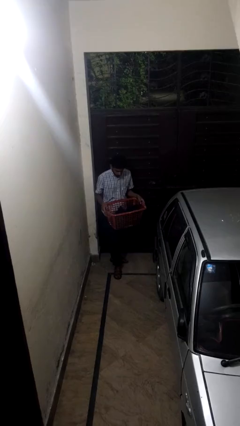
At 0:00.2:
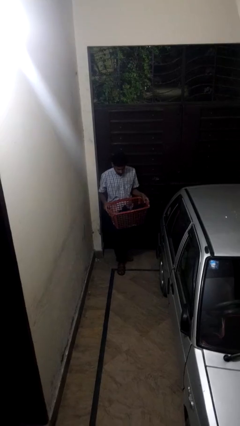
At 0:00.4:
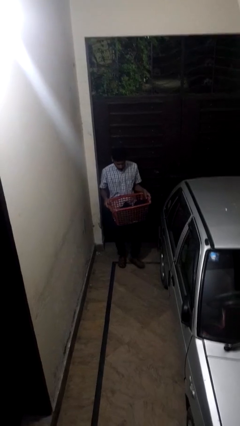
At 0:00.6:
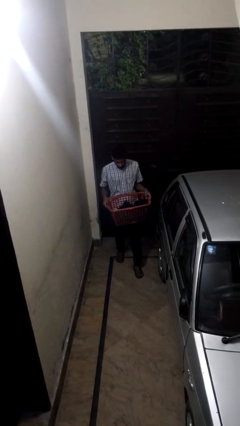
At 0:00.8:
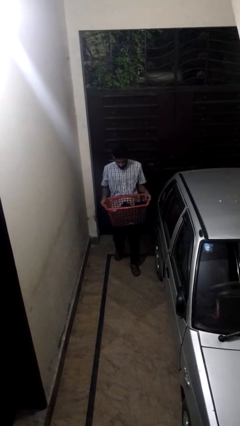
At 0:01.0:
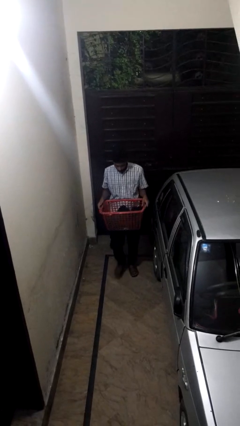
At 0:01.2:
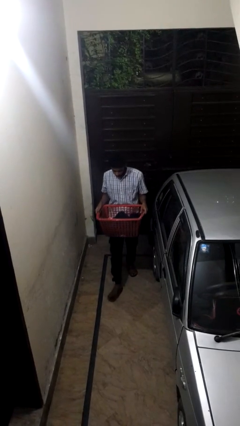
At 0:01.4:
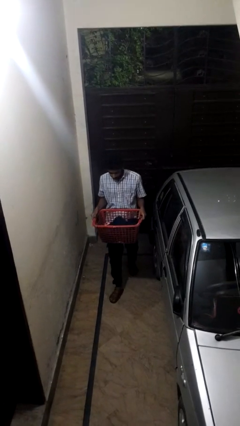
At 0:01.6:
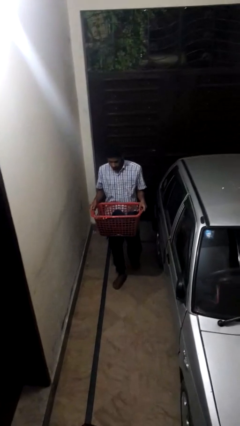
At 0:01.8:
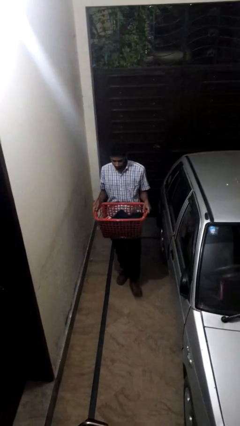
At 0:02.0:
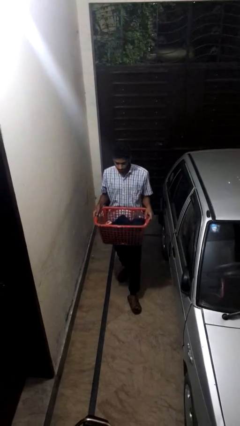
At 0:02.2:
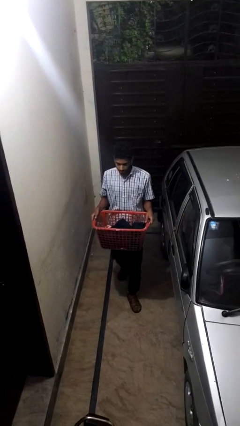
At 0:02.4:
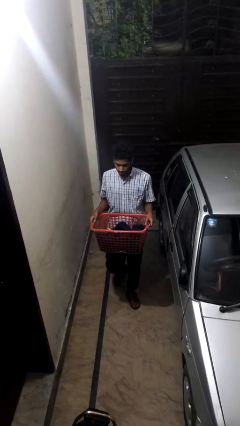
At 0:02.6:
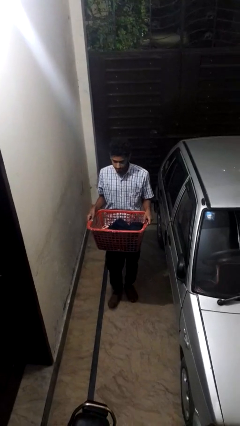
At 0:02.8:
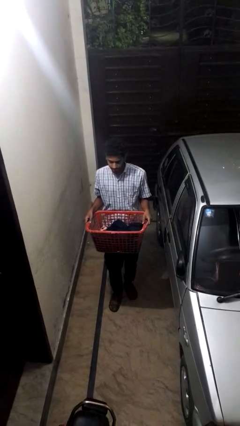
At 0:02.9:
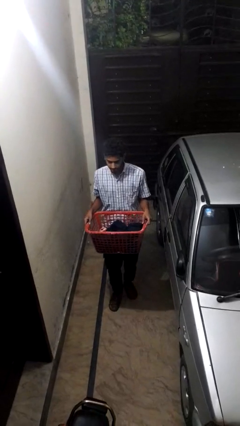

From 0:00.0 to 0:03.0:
person carries laundry basket

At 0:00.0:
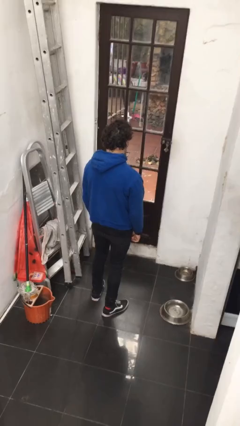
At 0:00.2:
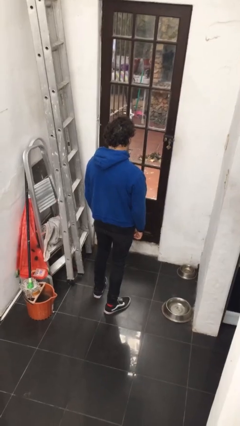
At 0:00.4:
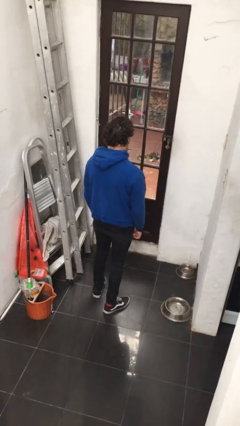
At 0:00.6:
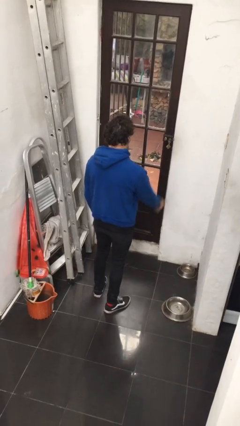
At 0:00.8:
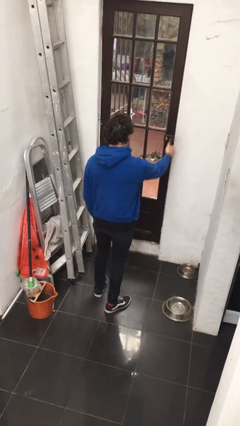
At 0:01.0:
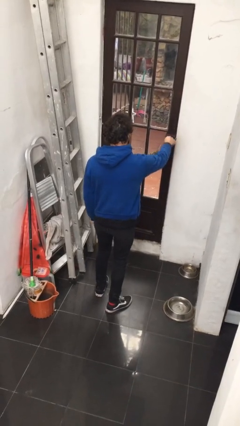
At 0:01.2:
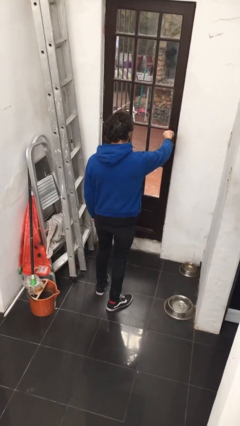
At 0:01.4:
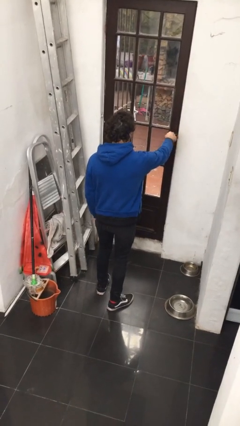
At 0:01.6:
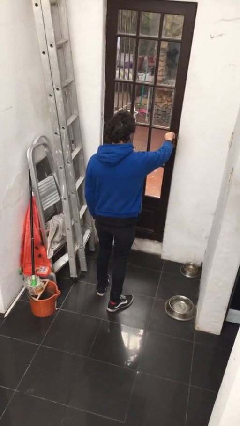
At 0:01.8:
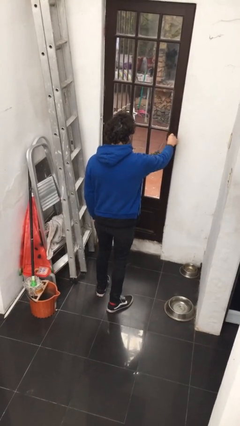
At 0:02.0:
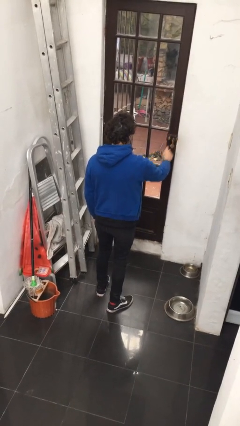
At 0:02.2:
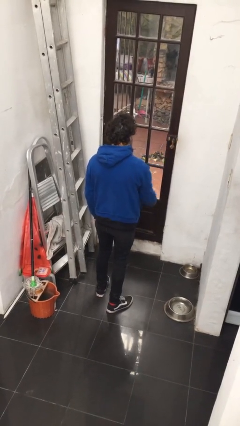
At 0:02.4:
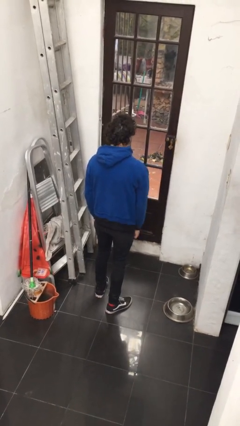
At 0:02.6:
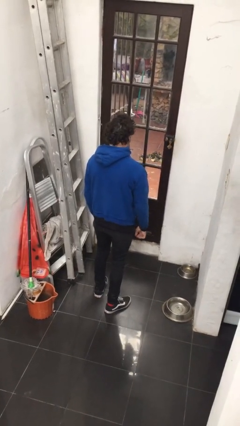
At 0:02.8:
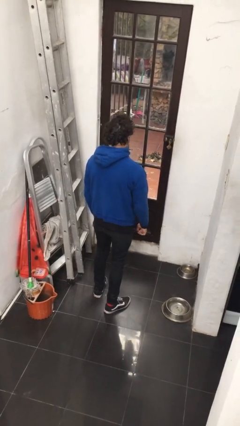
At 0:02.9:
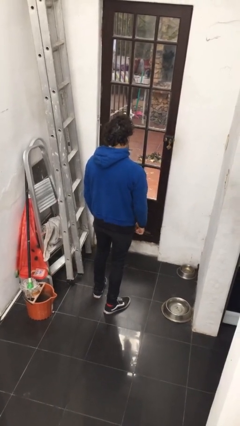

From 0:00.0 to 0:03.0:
person unlocks door with keys

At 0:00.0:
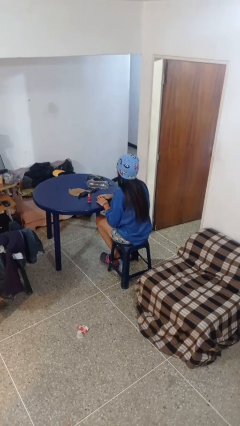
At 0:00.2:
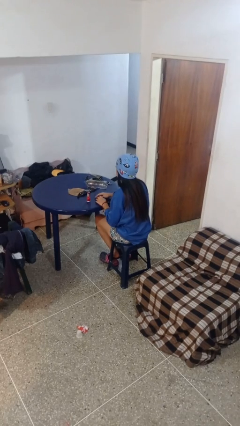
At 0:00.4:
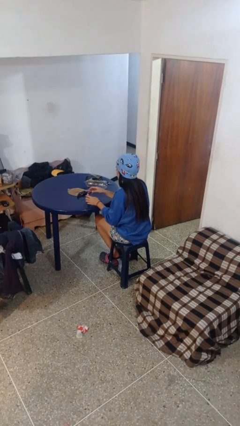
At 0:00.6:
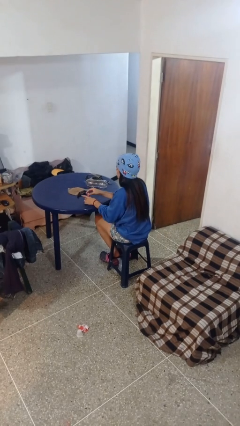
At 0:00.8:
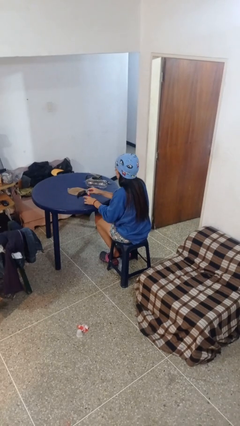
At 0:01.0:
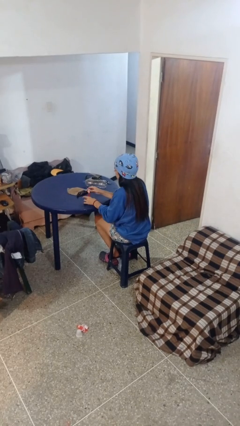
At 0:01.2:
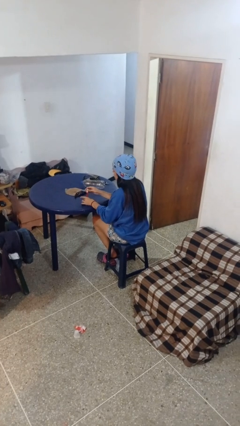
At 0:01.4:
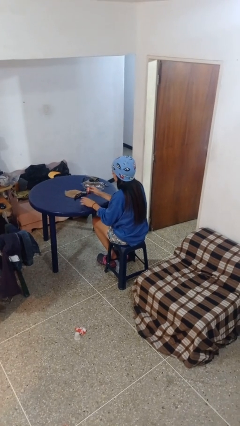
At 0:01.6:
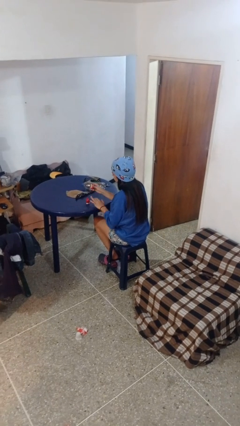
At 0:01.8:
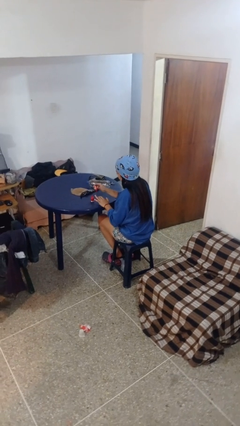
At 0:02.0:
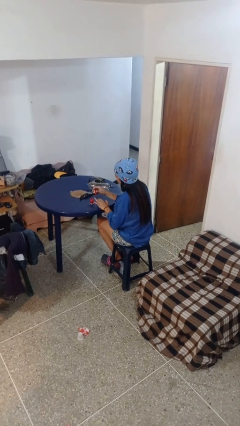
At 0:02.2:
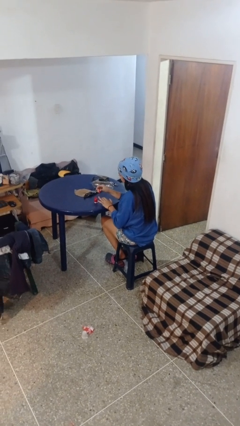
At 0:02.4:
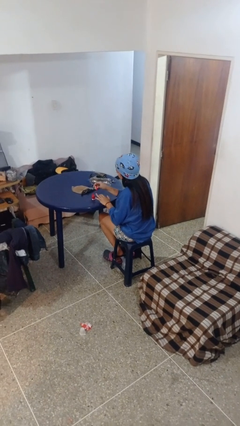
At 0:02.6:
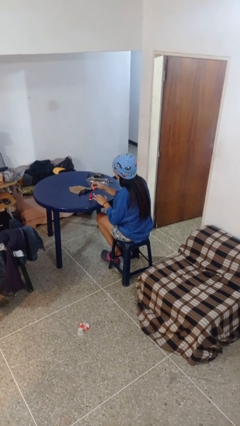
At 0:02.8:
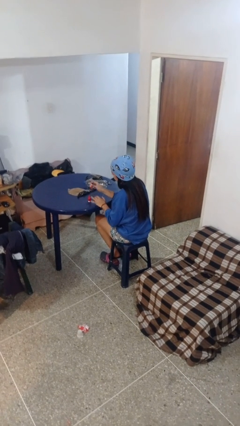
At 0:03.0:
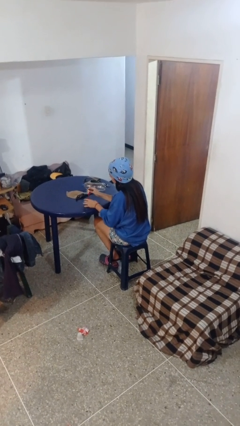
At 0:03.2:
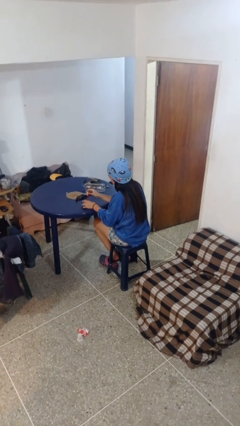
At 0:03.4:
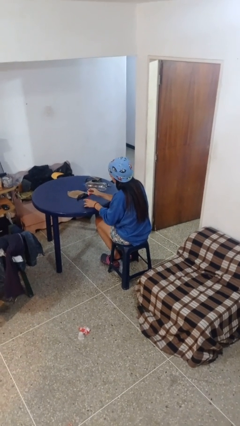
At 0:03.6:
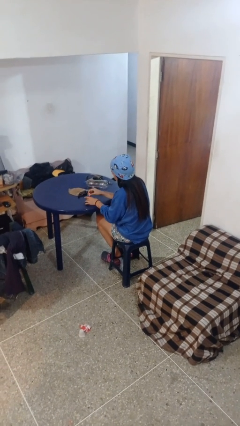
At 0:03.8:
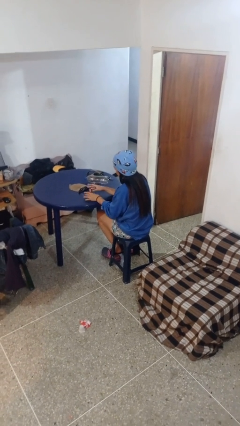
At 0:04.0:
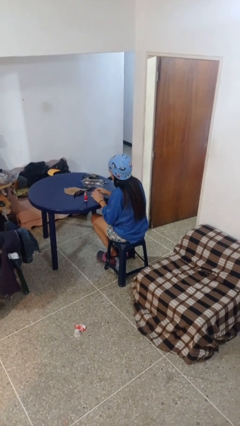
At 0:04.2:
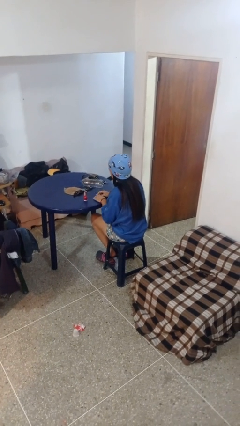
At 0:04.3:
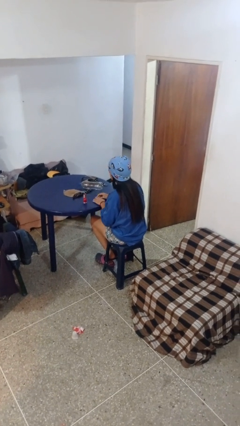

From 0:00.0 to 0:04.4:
person paints fingernails

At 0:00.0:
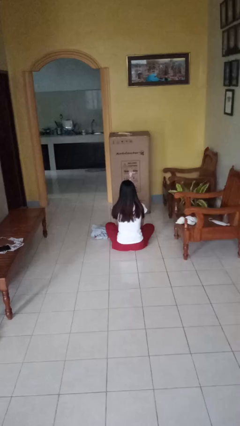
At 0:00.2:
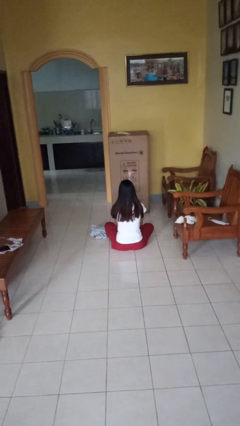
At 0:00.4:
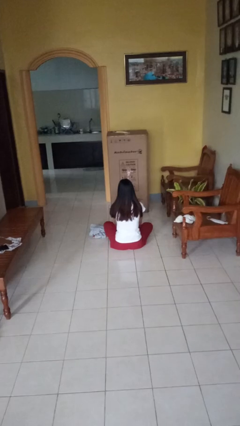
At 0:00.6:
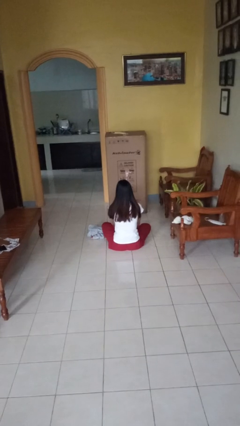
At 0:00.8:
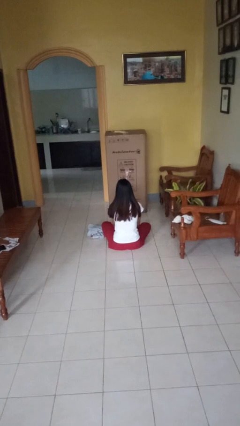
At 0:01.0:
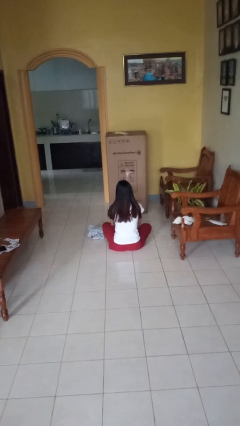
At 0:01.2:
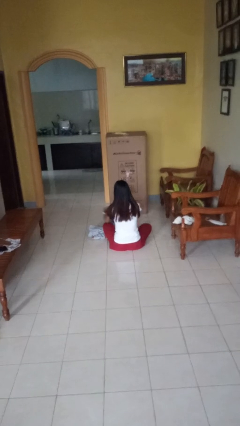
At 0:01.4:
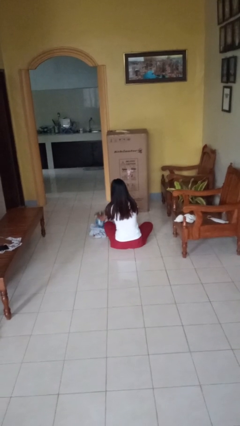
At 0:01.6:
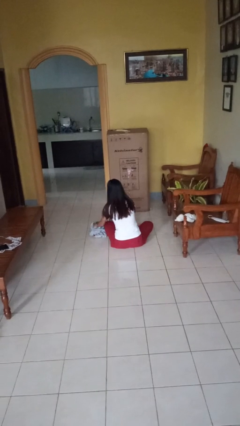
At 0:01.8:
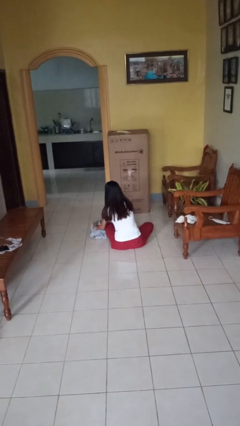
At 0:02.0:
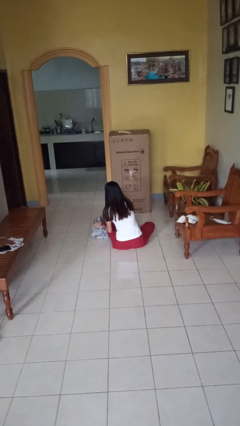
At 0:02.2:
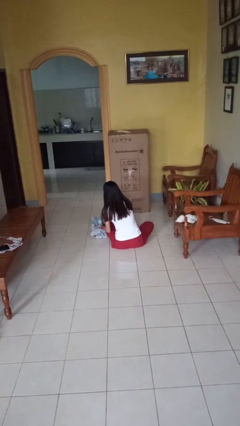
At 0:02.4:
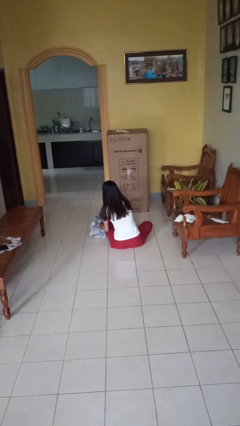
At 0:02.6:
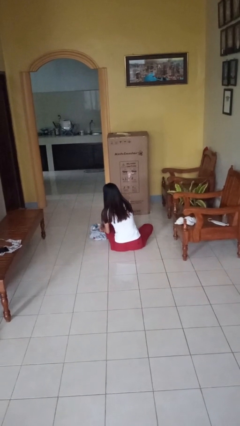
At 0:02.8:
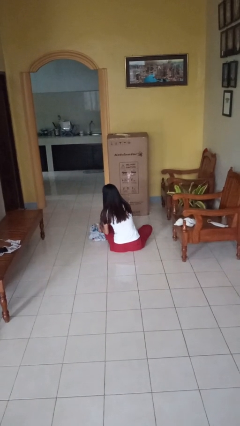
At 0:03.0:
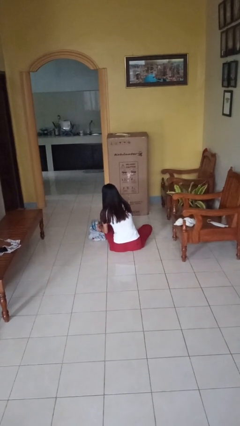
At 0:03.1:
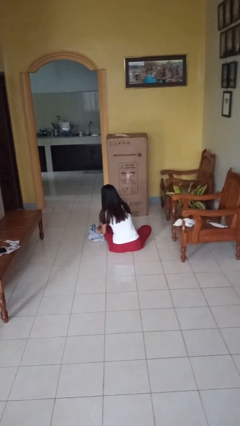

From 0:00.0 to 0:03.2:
person folds towel

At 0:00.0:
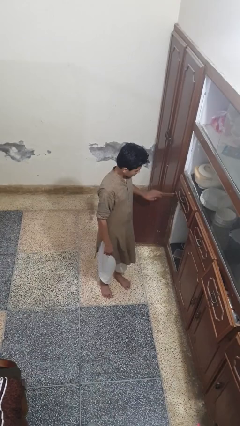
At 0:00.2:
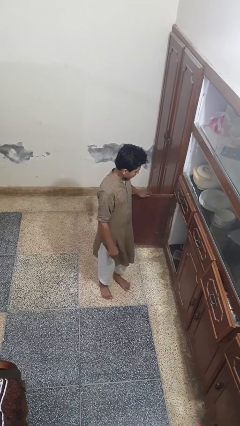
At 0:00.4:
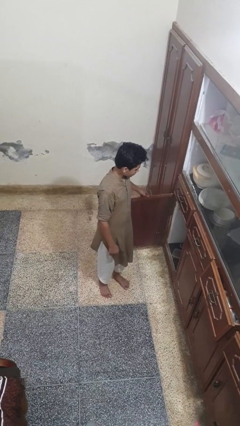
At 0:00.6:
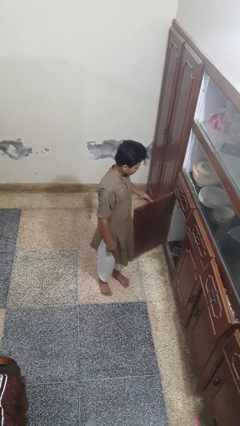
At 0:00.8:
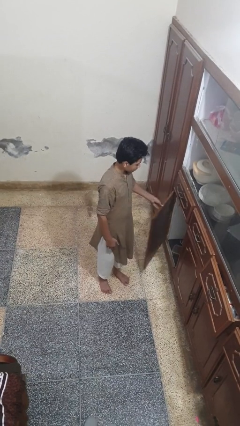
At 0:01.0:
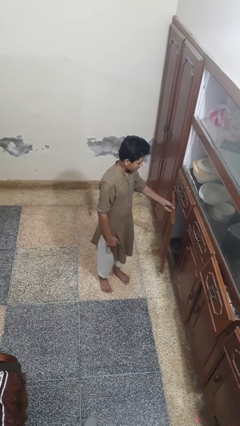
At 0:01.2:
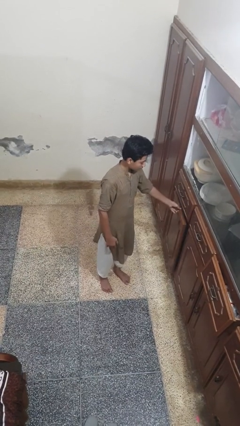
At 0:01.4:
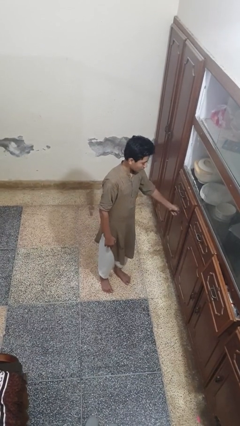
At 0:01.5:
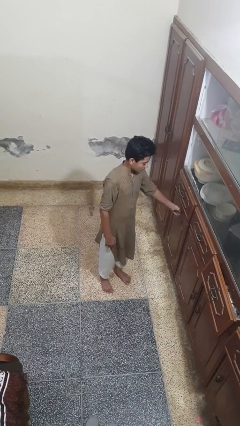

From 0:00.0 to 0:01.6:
person closes cabinet

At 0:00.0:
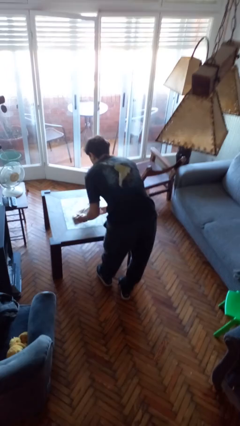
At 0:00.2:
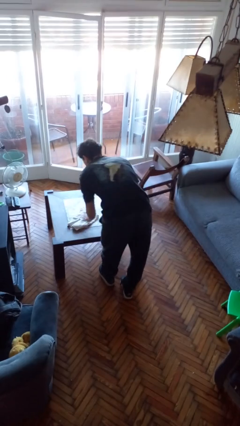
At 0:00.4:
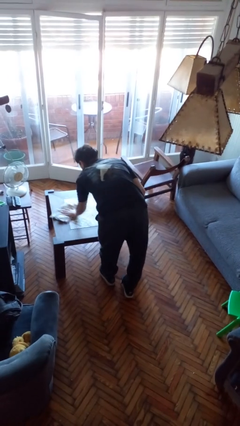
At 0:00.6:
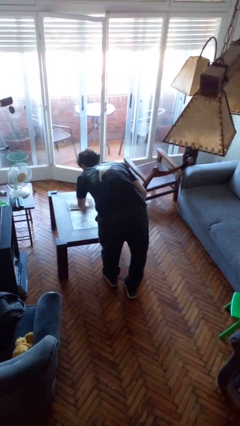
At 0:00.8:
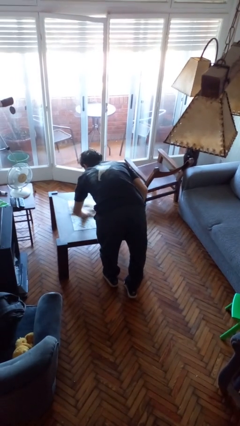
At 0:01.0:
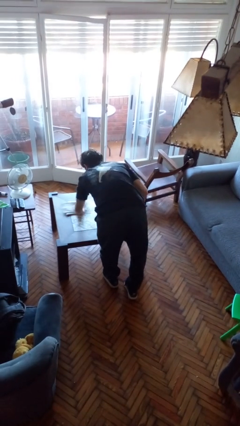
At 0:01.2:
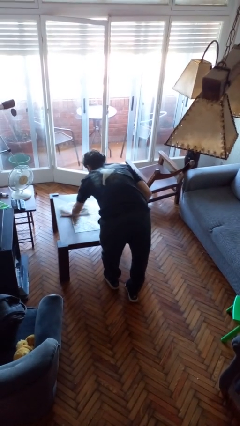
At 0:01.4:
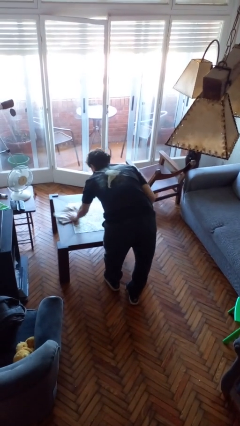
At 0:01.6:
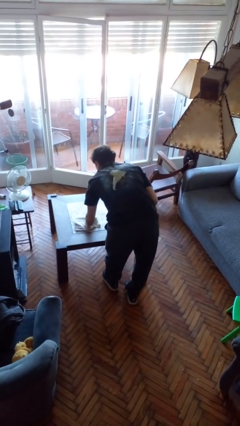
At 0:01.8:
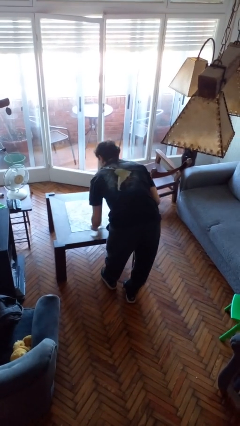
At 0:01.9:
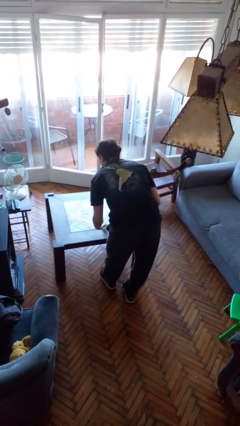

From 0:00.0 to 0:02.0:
person cleans table with rag
